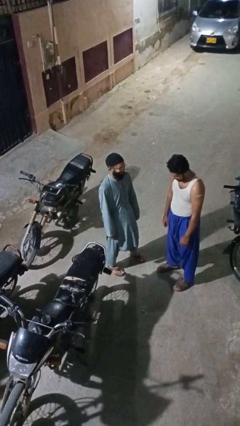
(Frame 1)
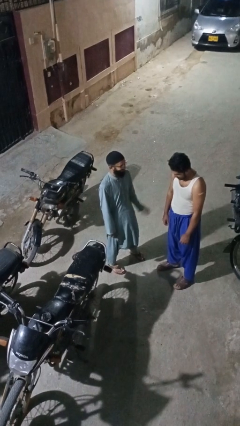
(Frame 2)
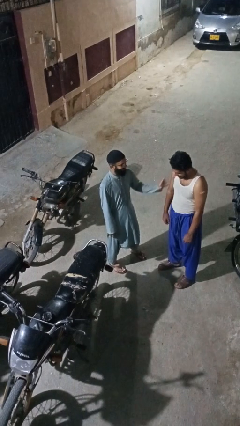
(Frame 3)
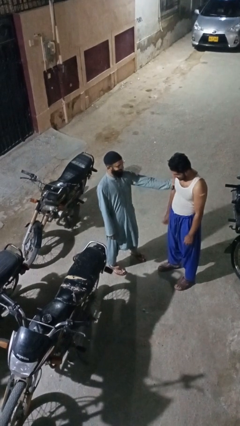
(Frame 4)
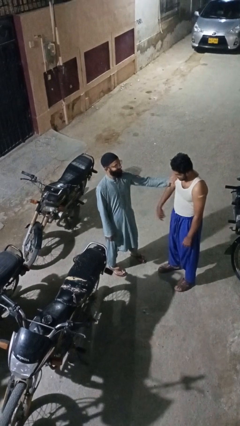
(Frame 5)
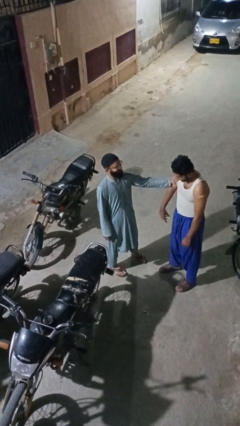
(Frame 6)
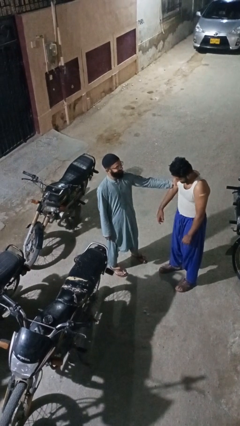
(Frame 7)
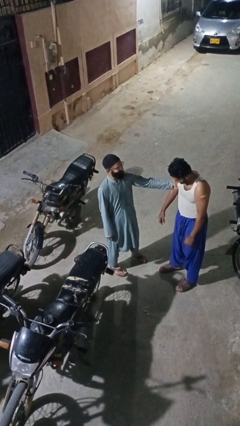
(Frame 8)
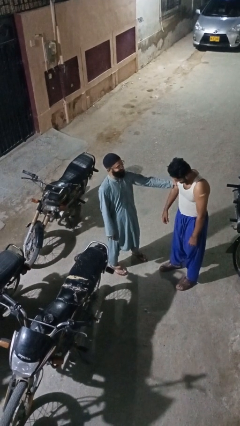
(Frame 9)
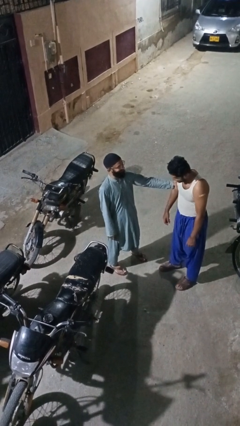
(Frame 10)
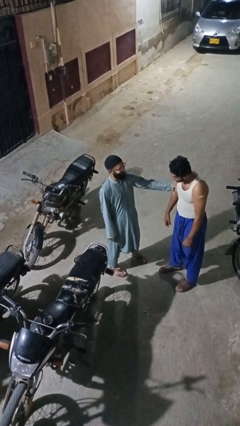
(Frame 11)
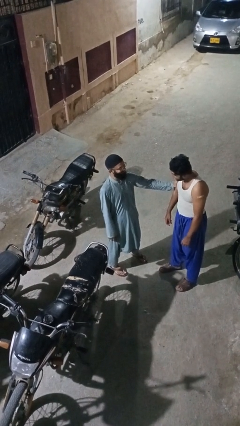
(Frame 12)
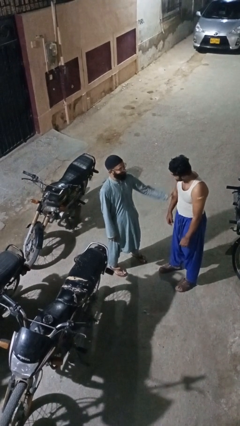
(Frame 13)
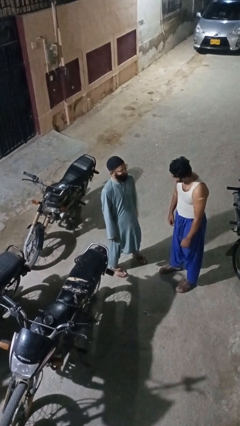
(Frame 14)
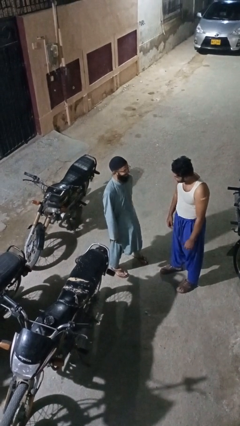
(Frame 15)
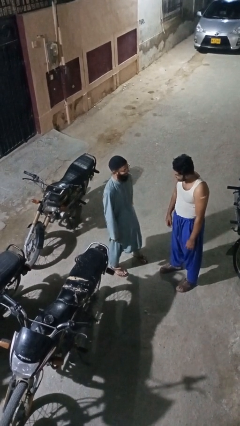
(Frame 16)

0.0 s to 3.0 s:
person grabs person by bicep

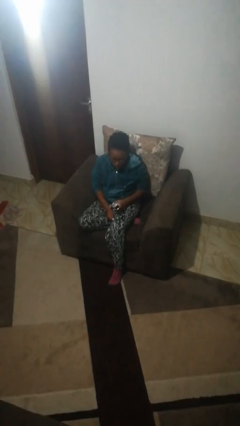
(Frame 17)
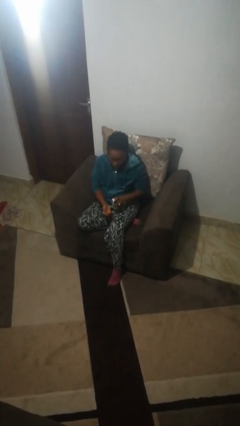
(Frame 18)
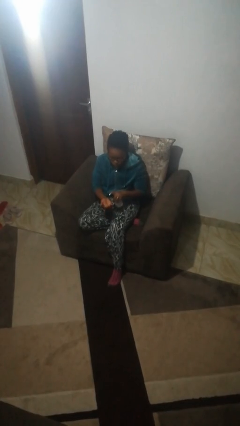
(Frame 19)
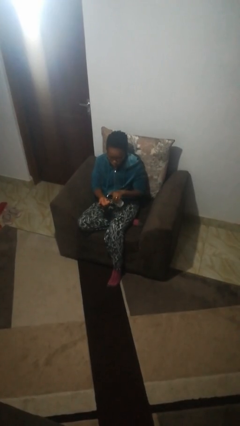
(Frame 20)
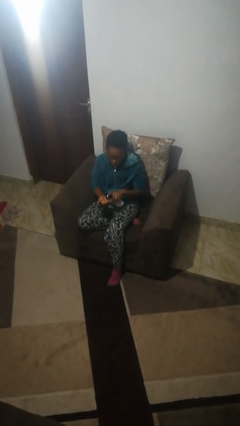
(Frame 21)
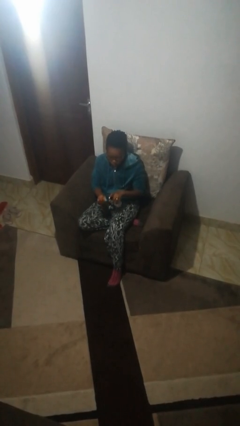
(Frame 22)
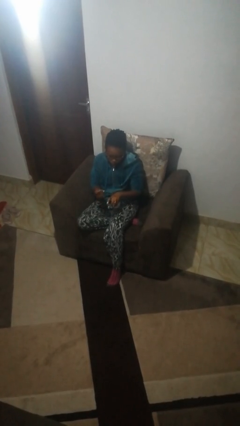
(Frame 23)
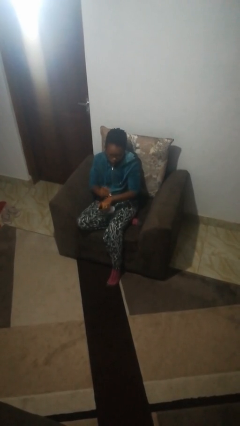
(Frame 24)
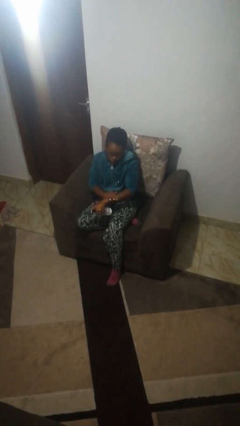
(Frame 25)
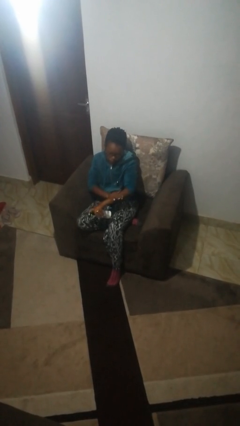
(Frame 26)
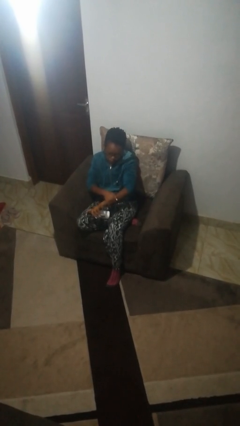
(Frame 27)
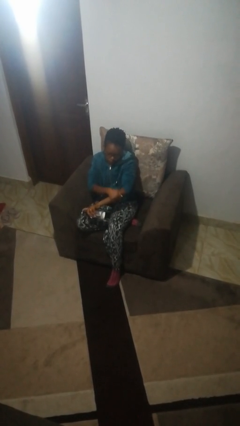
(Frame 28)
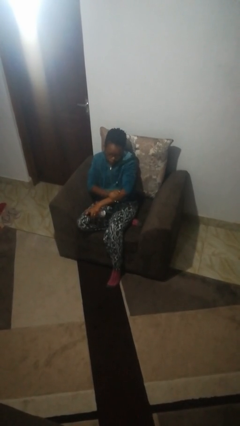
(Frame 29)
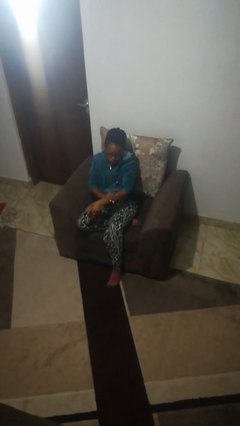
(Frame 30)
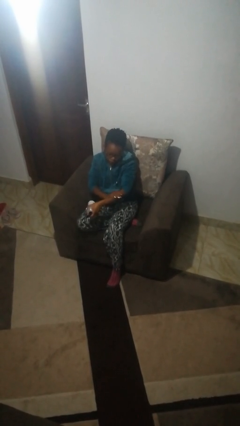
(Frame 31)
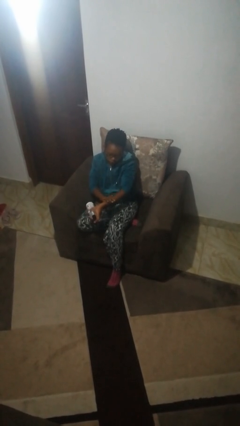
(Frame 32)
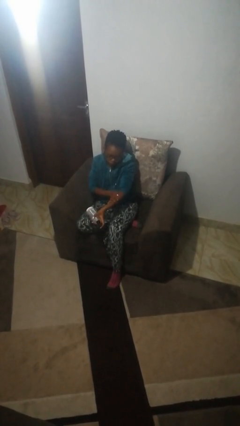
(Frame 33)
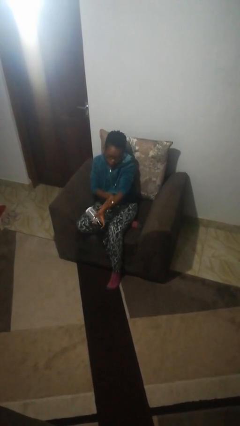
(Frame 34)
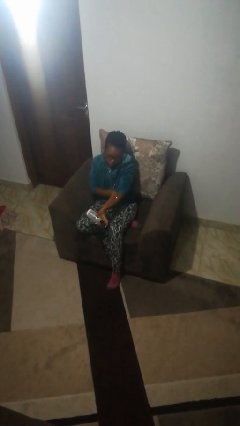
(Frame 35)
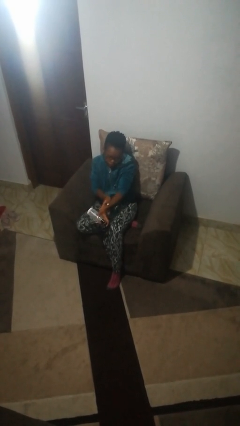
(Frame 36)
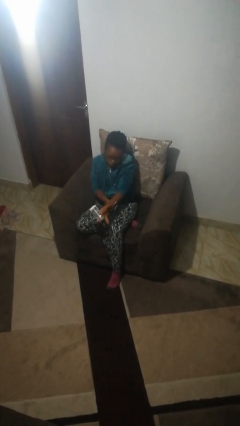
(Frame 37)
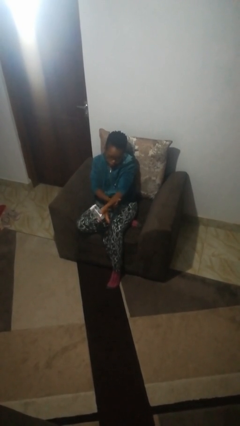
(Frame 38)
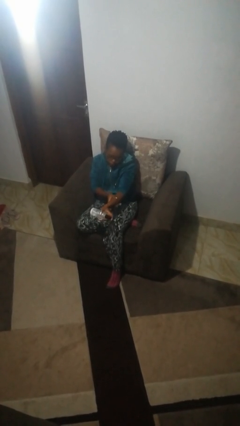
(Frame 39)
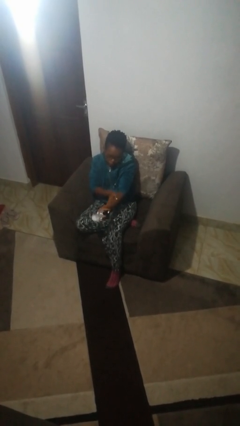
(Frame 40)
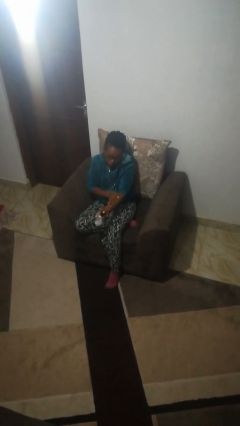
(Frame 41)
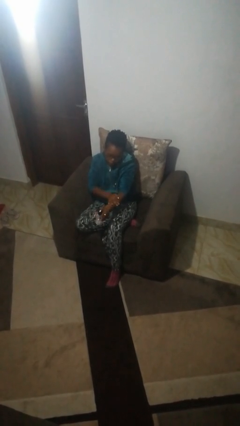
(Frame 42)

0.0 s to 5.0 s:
person applies sunscreen

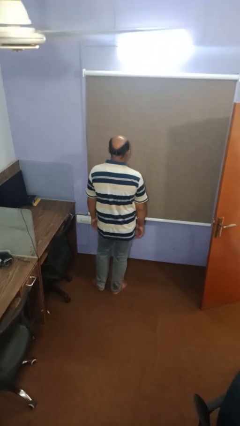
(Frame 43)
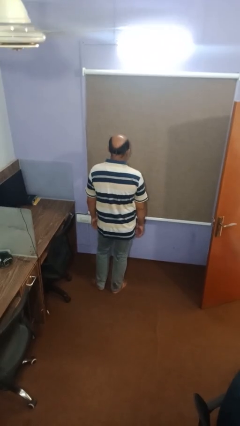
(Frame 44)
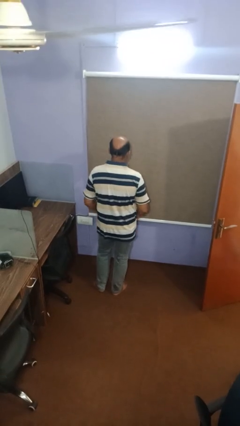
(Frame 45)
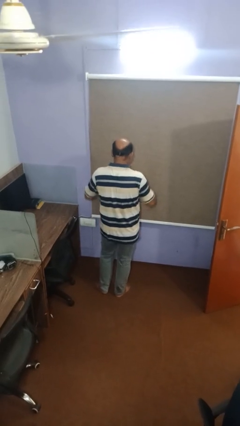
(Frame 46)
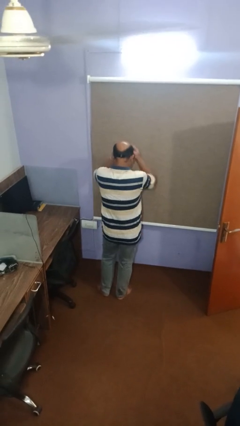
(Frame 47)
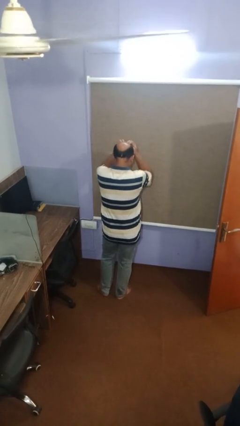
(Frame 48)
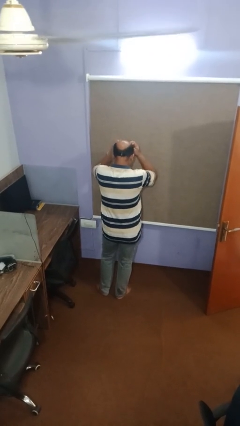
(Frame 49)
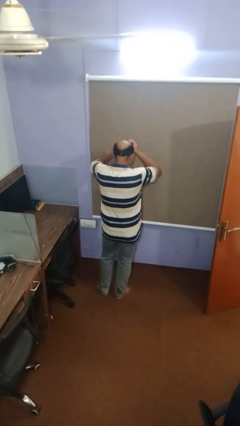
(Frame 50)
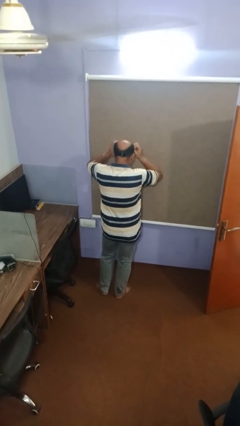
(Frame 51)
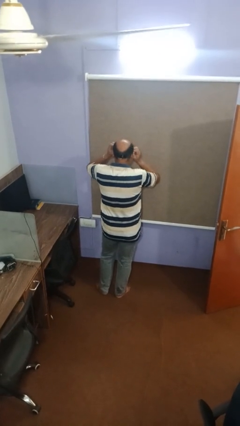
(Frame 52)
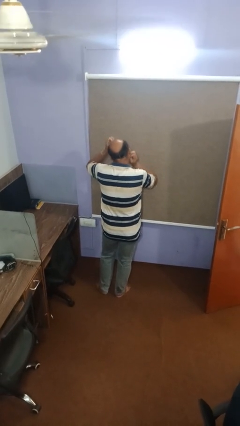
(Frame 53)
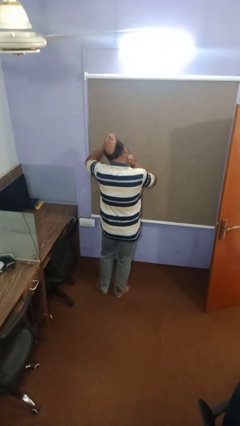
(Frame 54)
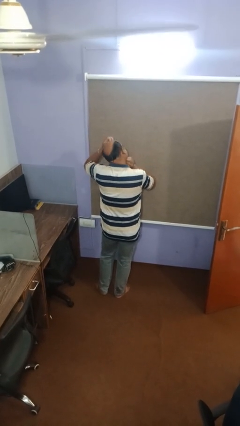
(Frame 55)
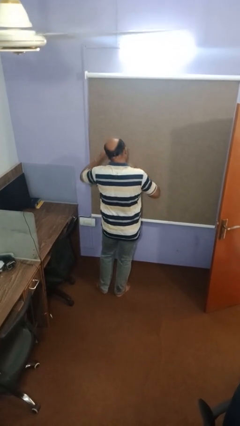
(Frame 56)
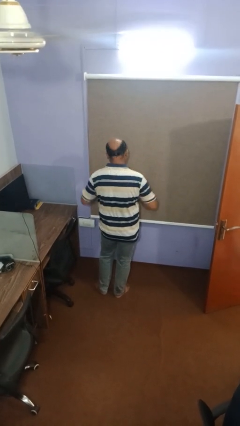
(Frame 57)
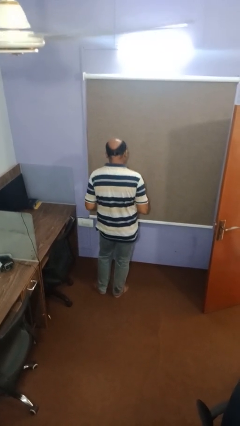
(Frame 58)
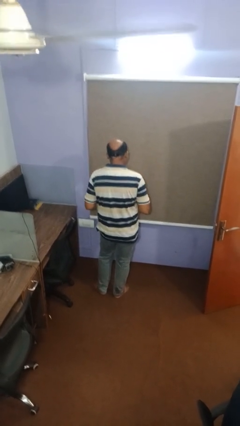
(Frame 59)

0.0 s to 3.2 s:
person scratches face

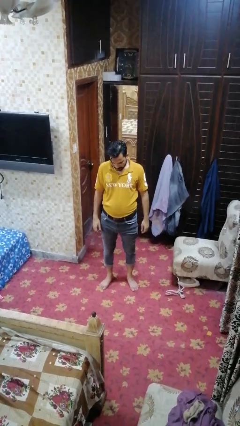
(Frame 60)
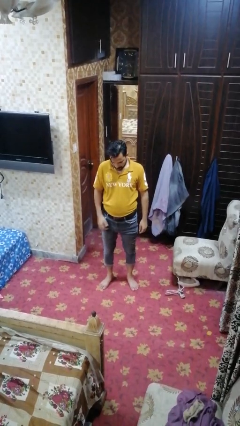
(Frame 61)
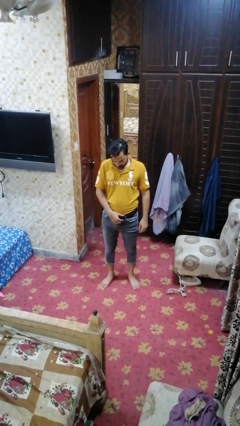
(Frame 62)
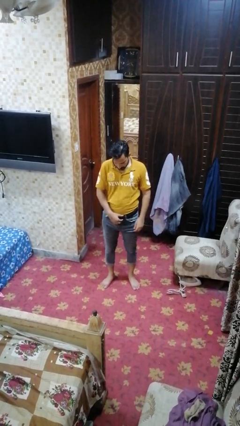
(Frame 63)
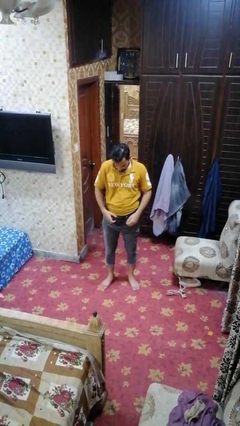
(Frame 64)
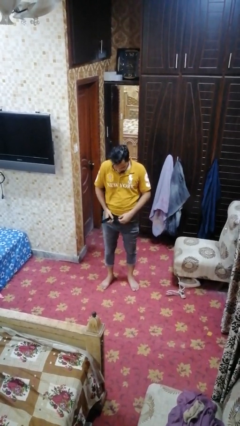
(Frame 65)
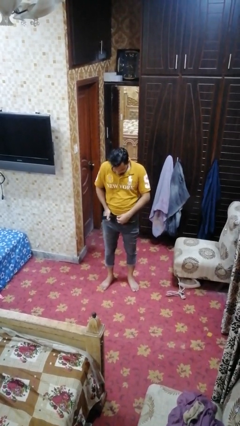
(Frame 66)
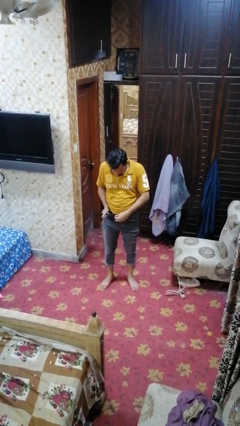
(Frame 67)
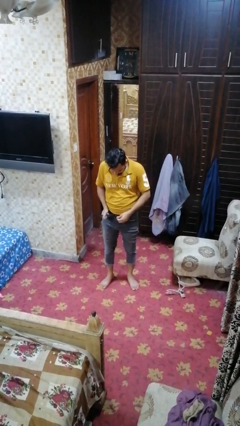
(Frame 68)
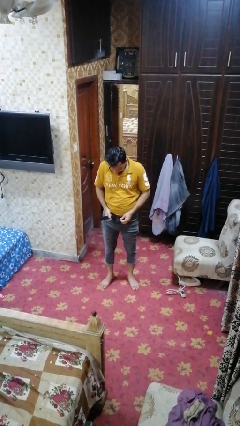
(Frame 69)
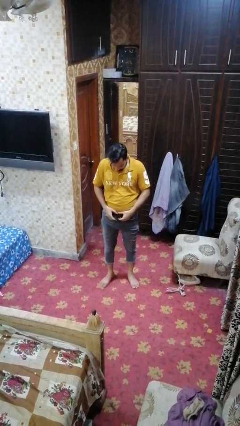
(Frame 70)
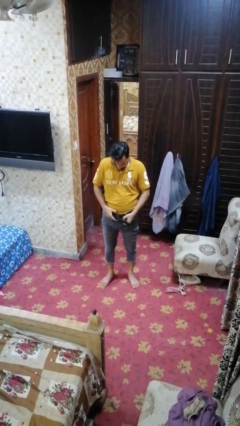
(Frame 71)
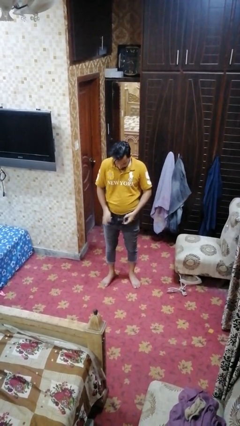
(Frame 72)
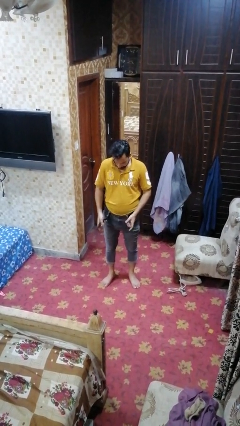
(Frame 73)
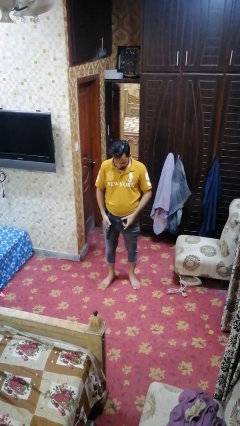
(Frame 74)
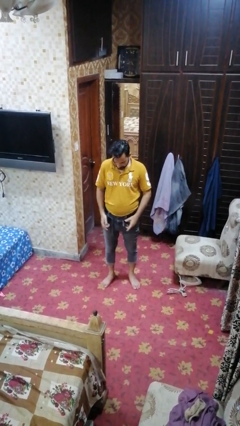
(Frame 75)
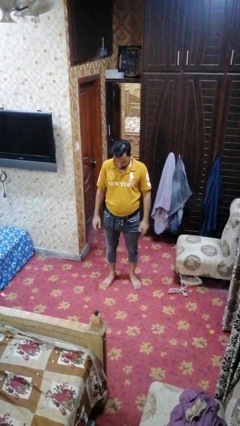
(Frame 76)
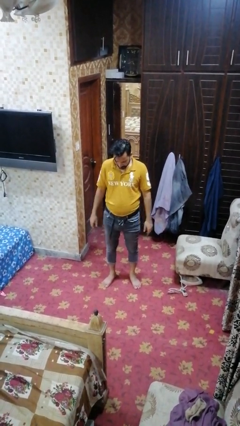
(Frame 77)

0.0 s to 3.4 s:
person takes off belt

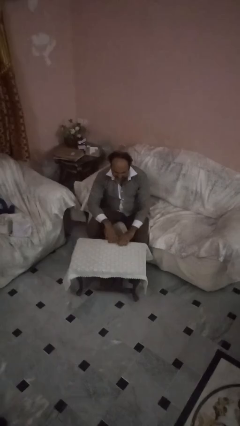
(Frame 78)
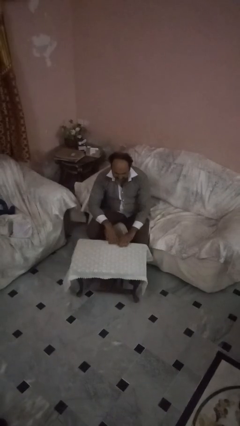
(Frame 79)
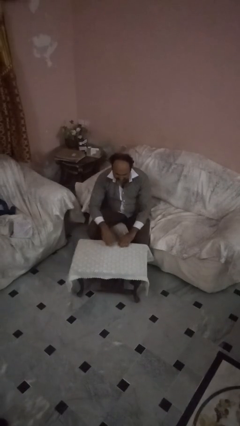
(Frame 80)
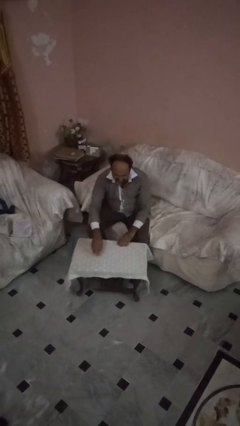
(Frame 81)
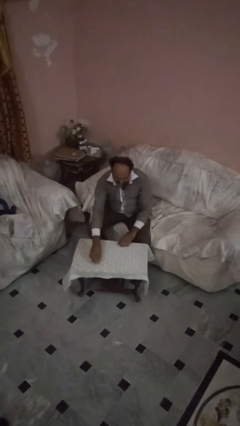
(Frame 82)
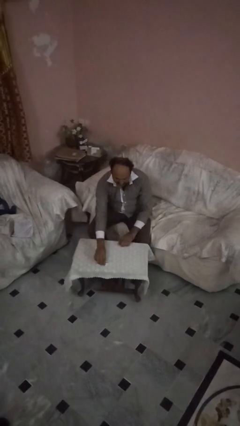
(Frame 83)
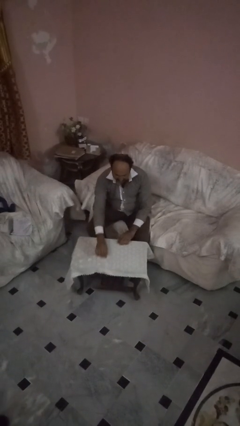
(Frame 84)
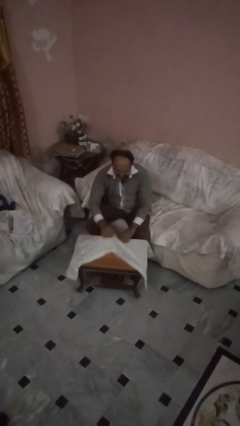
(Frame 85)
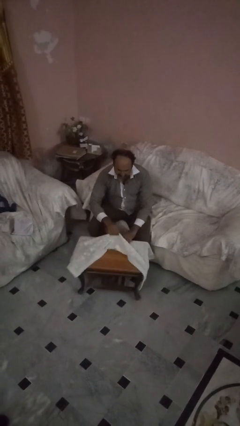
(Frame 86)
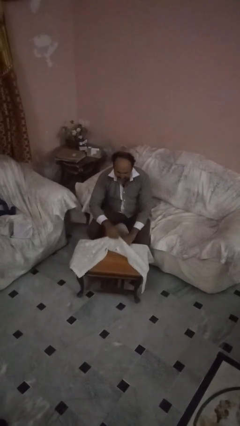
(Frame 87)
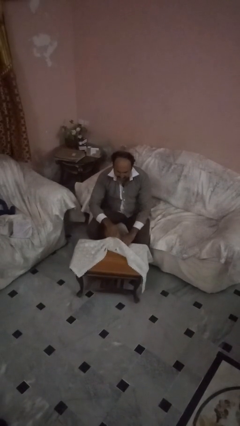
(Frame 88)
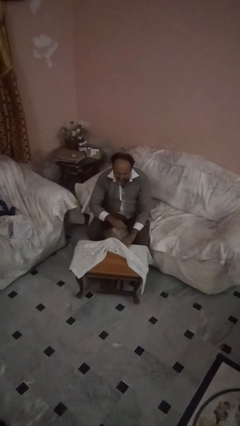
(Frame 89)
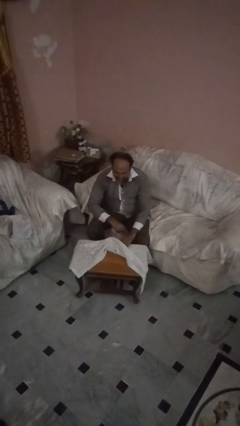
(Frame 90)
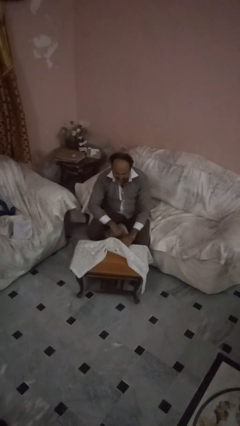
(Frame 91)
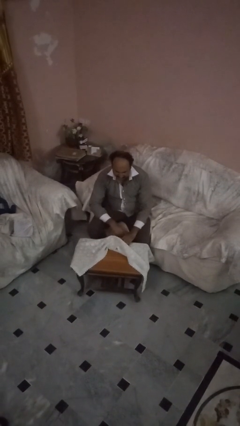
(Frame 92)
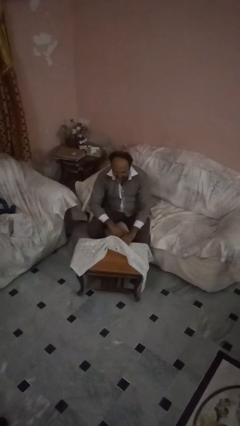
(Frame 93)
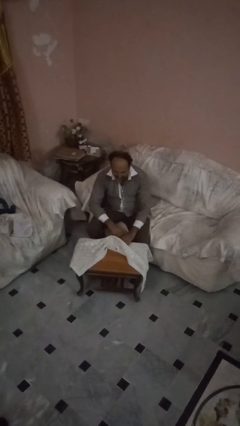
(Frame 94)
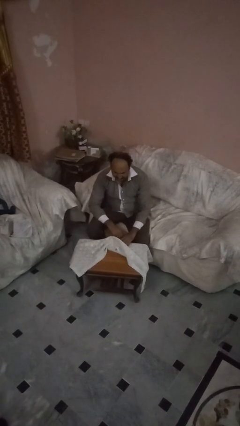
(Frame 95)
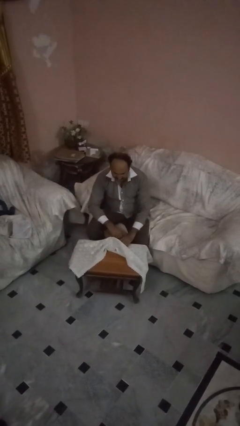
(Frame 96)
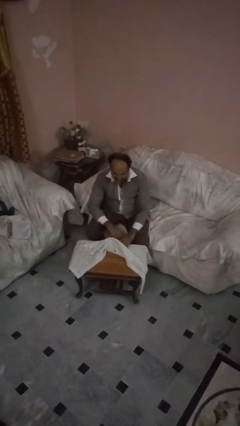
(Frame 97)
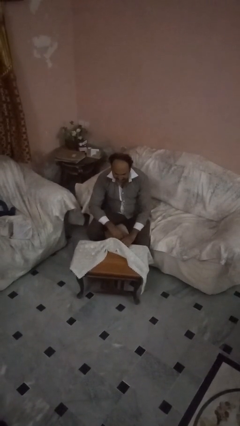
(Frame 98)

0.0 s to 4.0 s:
person folds tablecloth
